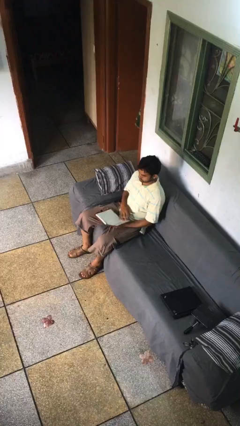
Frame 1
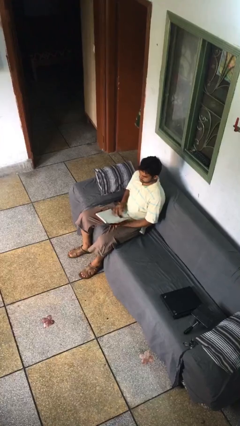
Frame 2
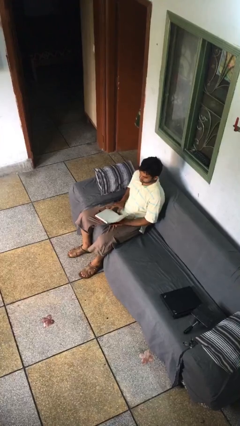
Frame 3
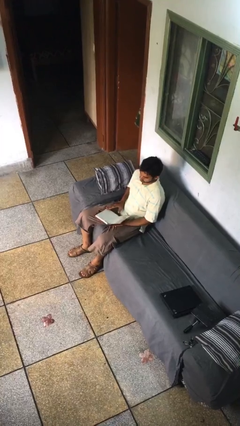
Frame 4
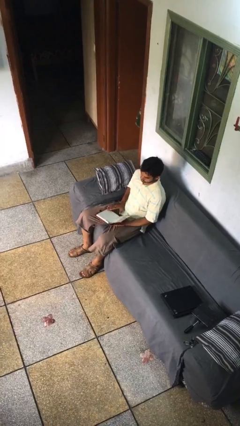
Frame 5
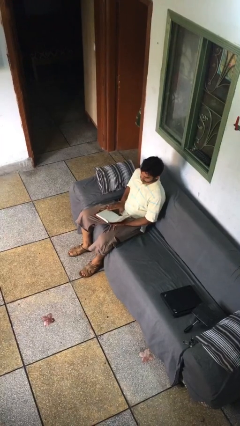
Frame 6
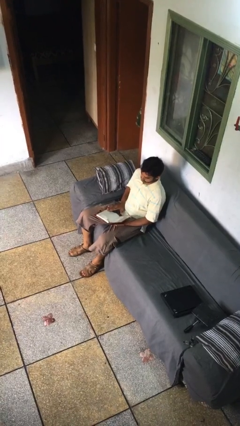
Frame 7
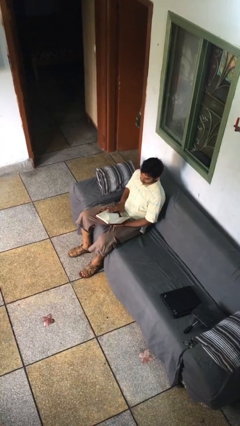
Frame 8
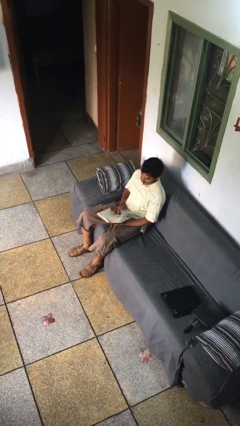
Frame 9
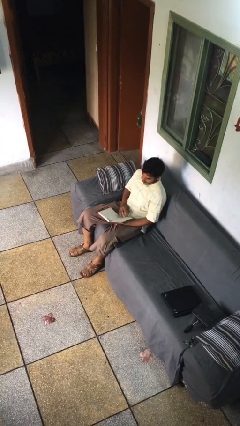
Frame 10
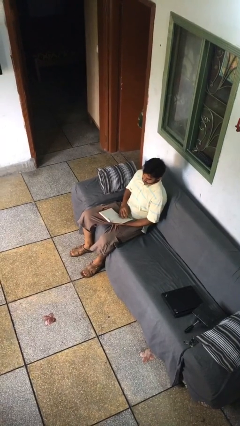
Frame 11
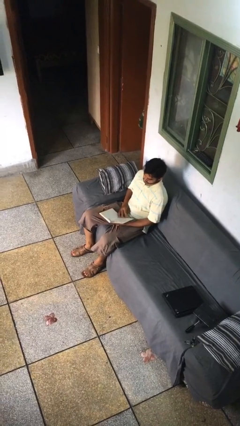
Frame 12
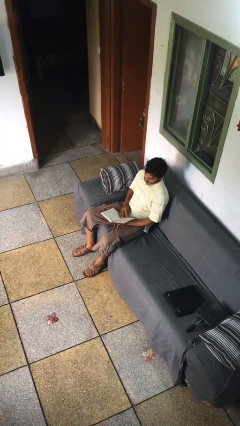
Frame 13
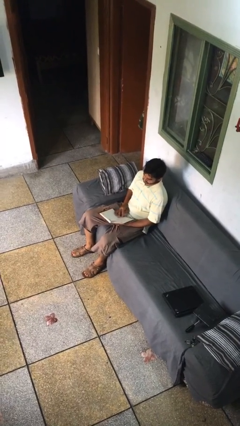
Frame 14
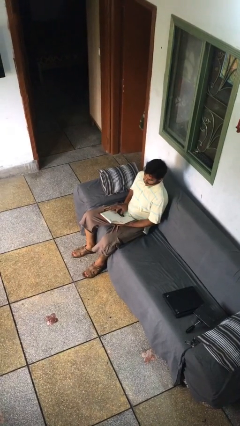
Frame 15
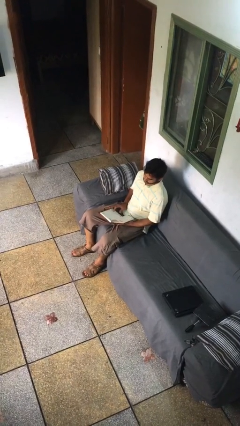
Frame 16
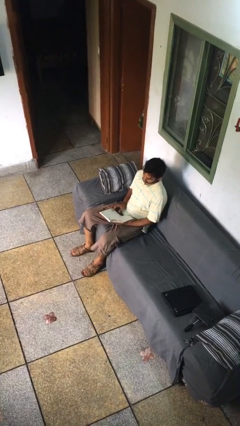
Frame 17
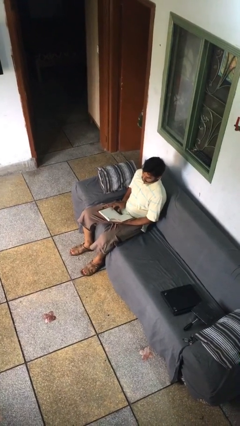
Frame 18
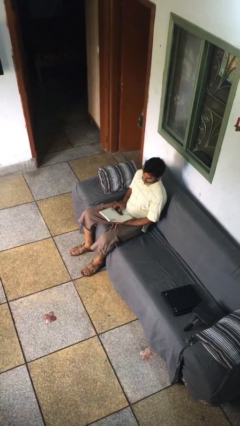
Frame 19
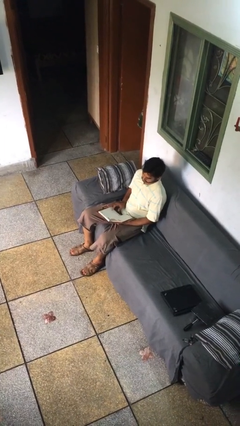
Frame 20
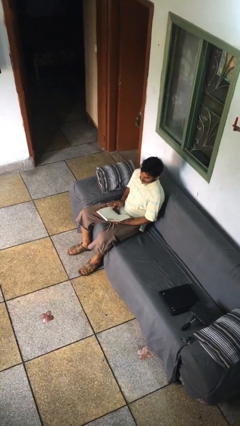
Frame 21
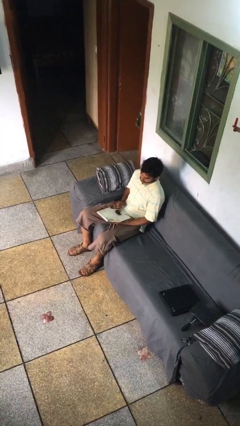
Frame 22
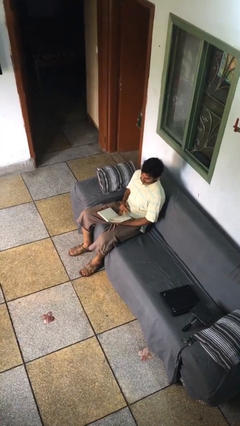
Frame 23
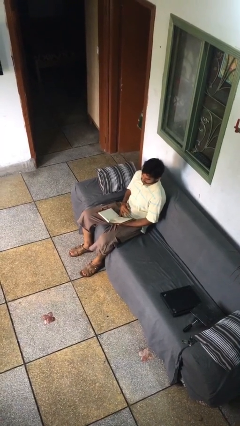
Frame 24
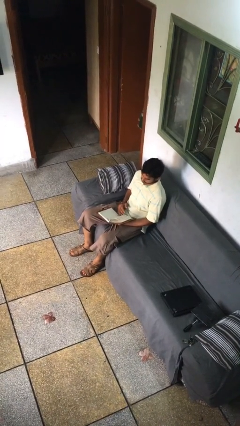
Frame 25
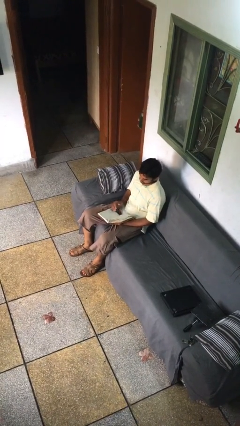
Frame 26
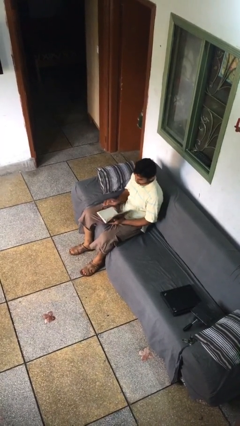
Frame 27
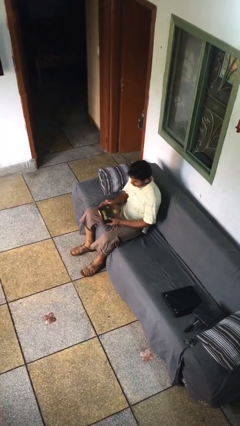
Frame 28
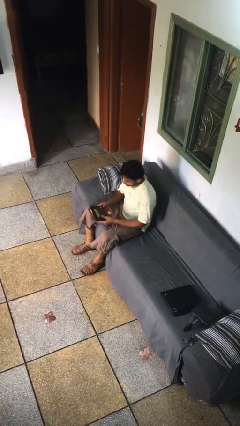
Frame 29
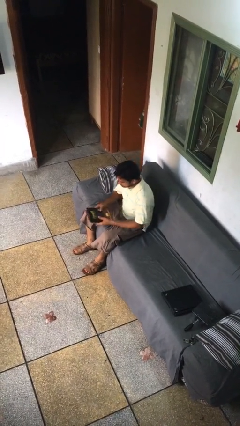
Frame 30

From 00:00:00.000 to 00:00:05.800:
person reads document

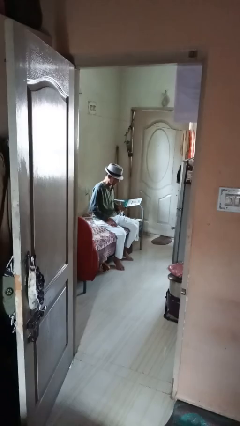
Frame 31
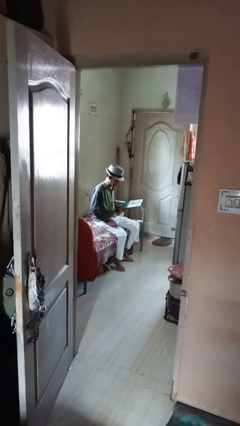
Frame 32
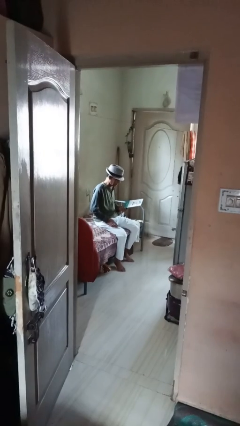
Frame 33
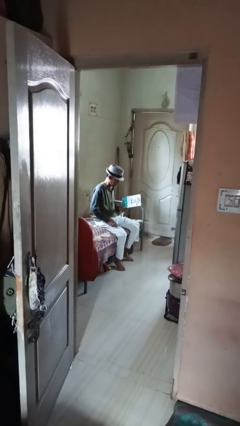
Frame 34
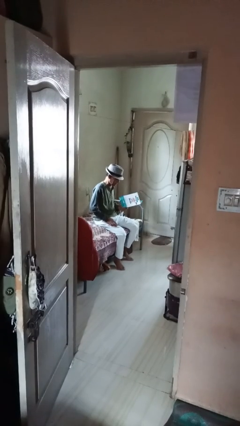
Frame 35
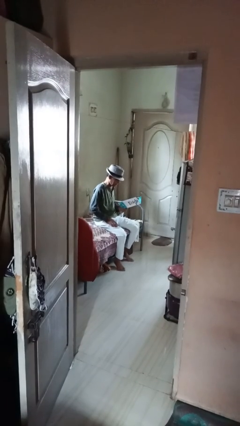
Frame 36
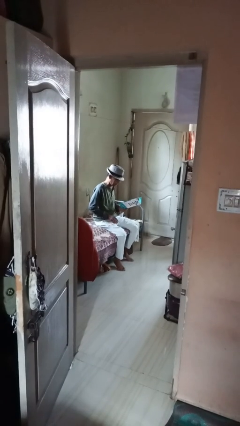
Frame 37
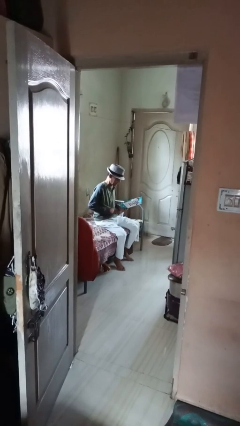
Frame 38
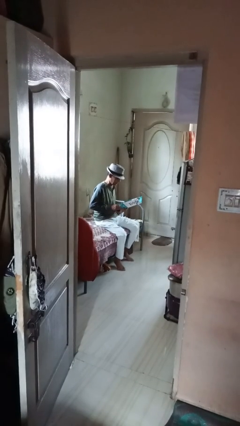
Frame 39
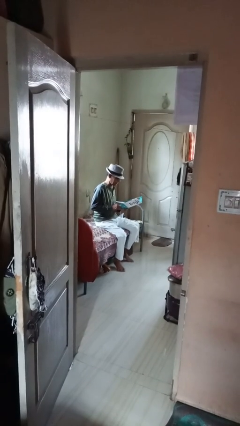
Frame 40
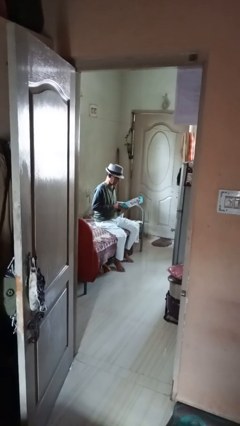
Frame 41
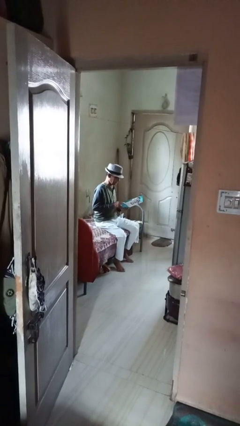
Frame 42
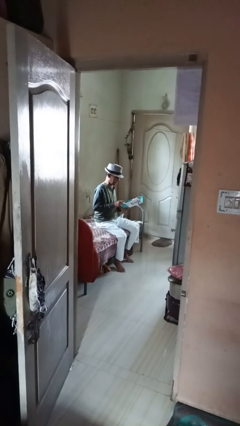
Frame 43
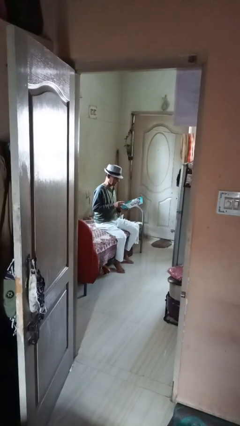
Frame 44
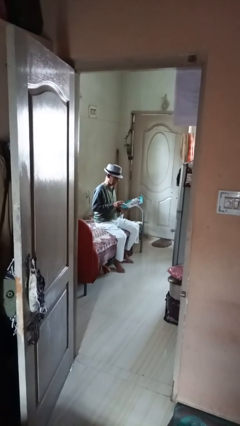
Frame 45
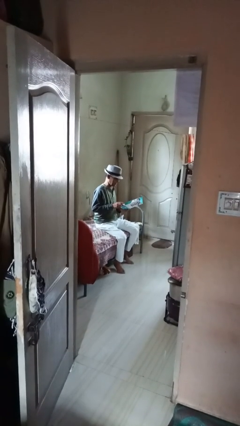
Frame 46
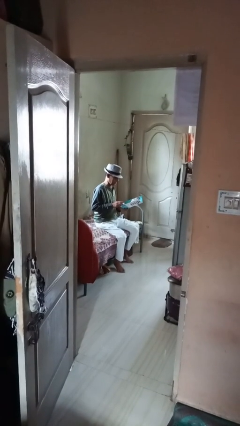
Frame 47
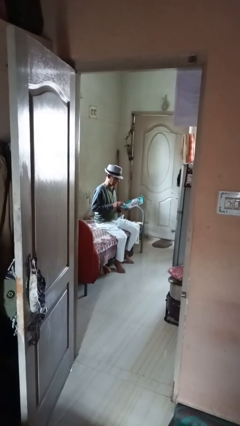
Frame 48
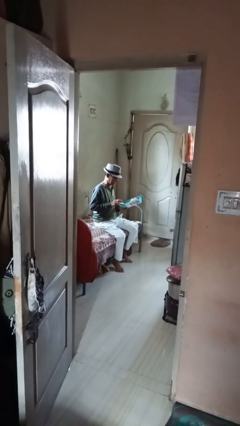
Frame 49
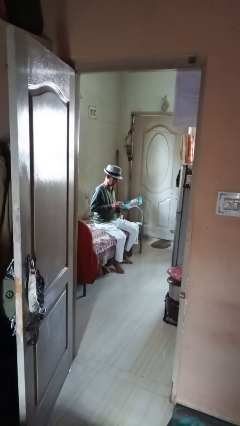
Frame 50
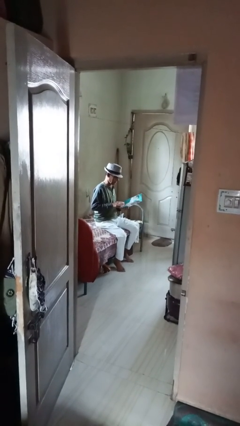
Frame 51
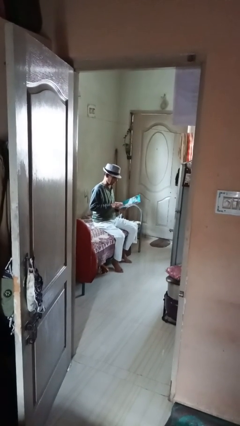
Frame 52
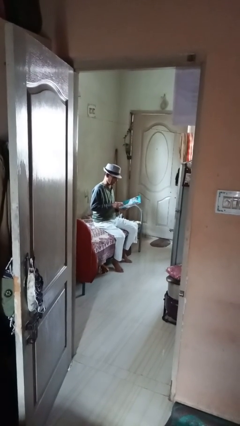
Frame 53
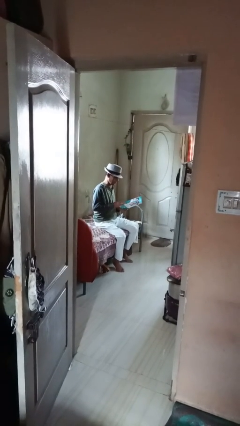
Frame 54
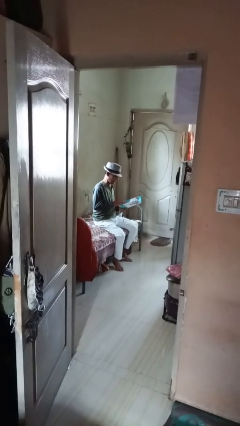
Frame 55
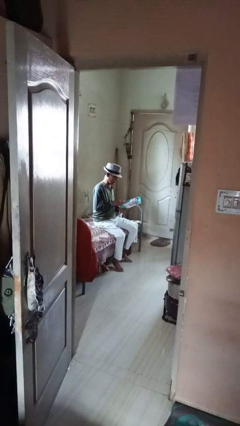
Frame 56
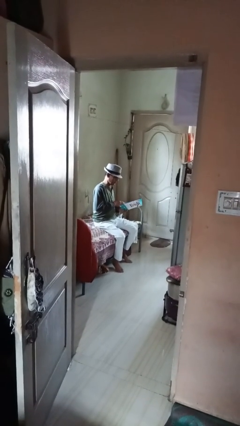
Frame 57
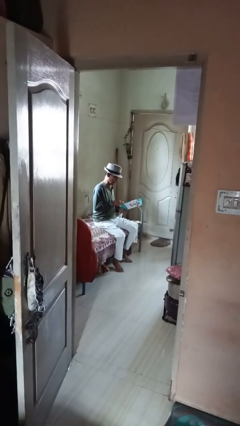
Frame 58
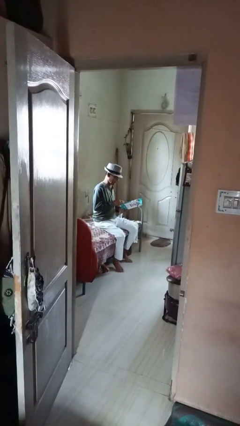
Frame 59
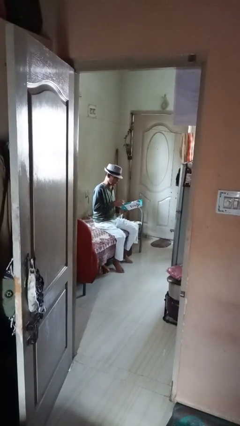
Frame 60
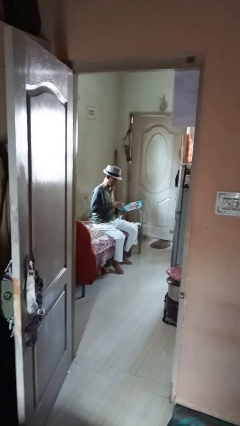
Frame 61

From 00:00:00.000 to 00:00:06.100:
person reads magazine

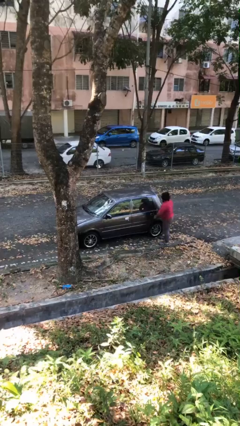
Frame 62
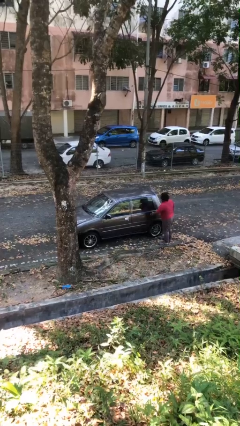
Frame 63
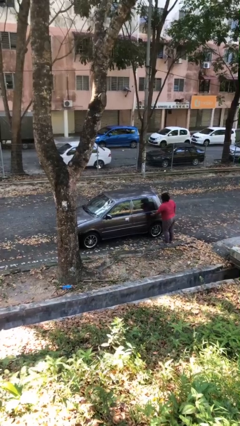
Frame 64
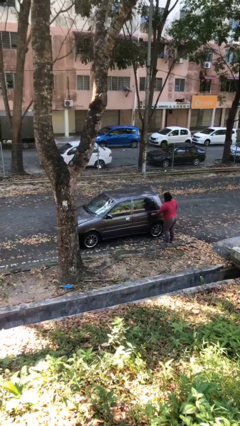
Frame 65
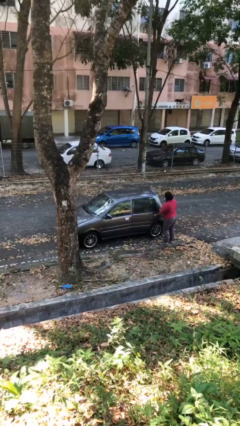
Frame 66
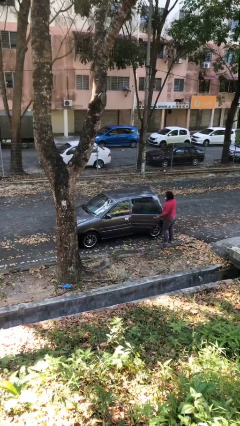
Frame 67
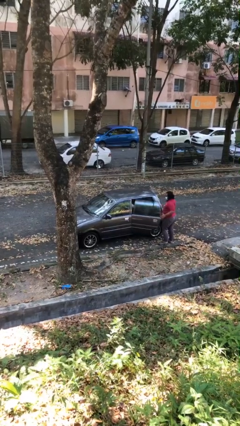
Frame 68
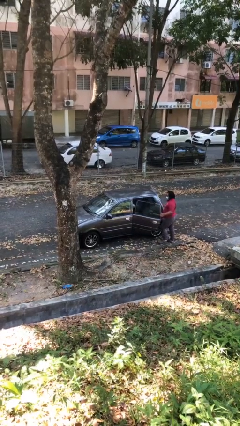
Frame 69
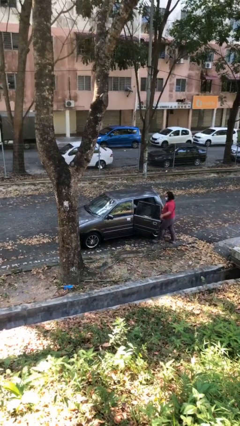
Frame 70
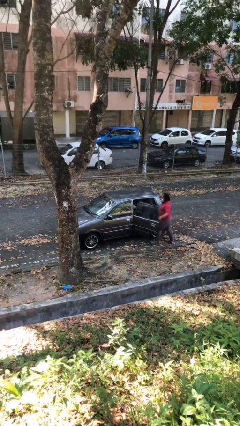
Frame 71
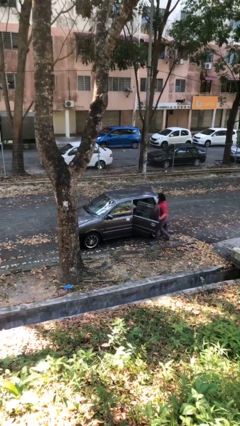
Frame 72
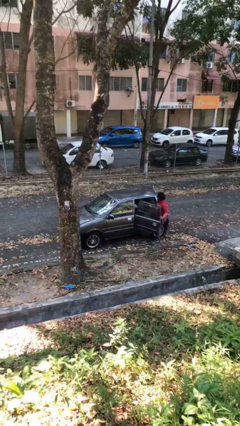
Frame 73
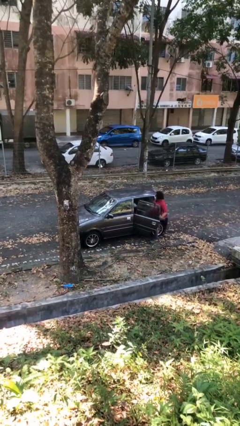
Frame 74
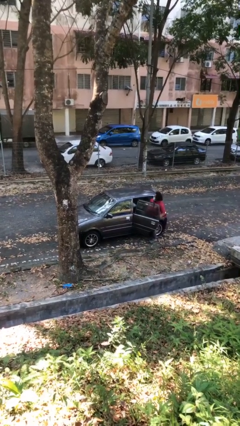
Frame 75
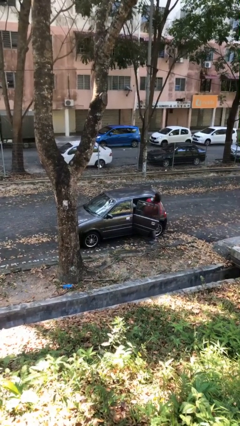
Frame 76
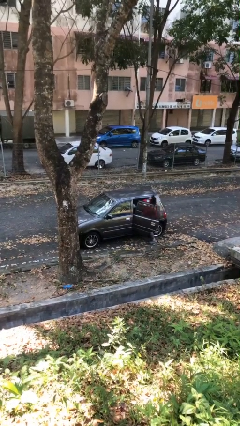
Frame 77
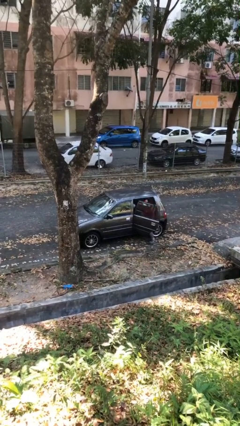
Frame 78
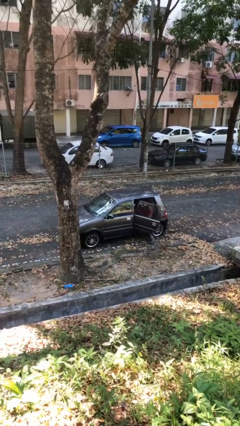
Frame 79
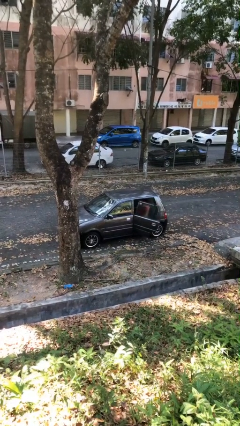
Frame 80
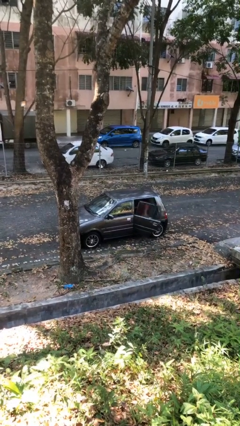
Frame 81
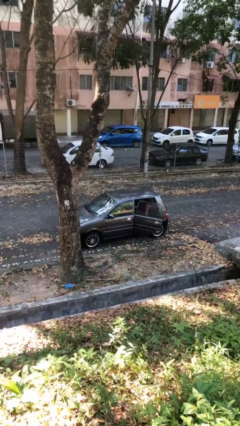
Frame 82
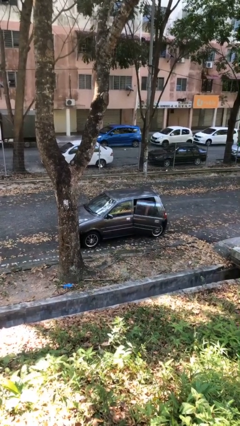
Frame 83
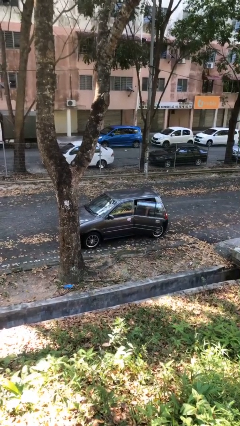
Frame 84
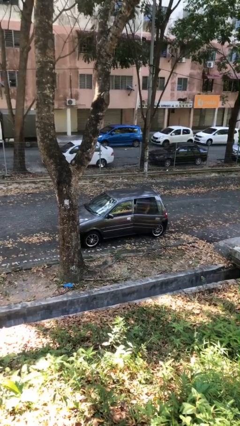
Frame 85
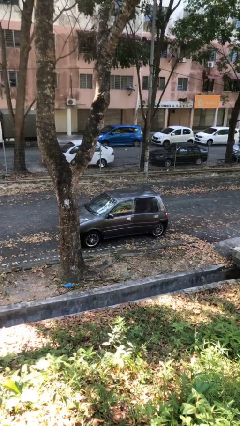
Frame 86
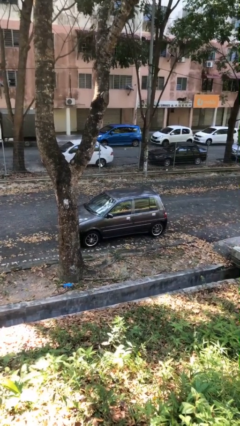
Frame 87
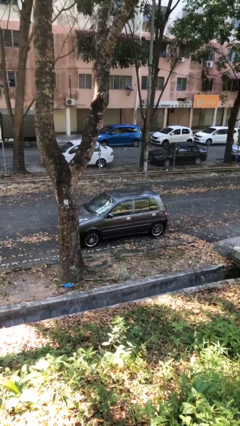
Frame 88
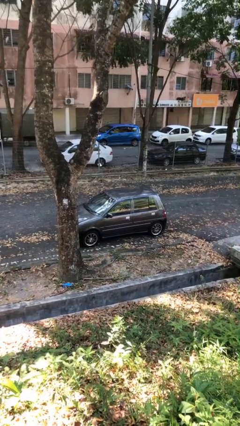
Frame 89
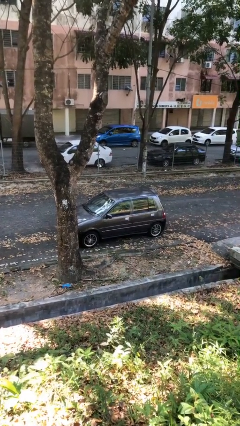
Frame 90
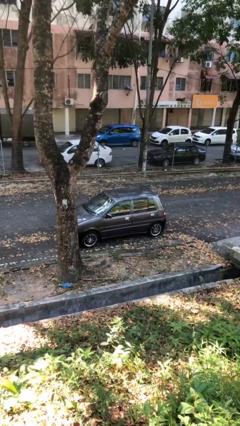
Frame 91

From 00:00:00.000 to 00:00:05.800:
car picks up person
